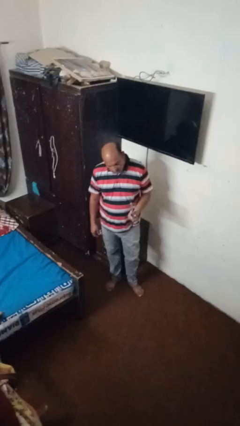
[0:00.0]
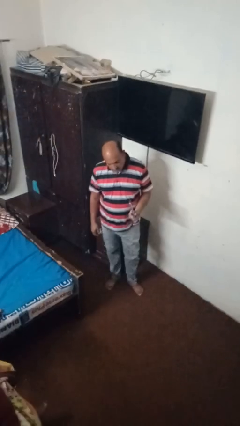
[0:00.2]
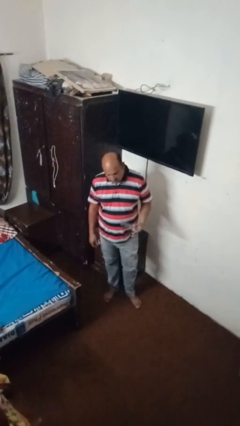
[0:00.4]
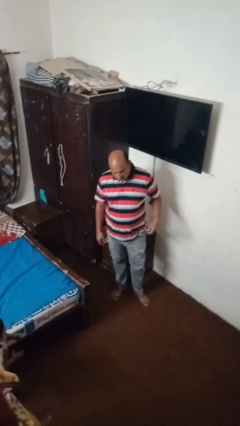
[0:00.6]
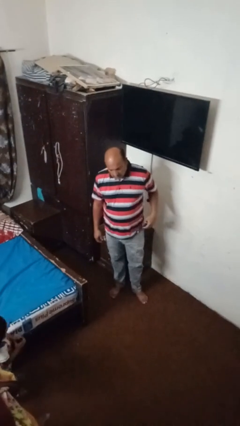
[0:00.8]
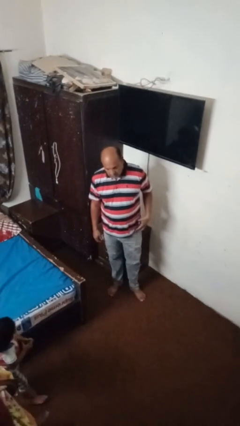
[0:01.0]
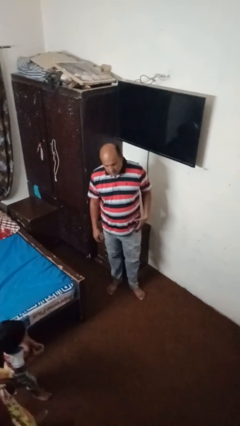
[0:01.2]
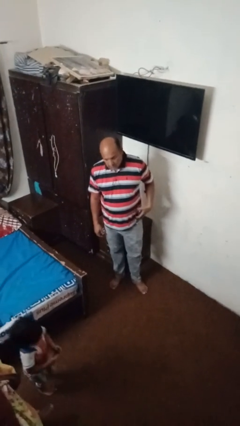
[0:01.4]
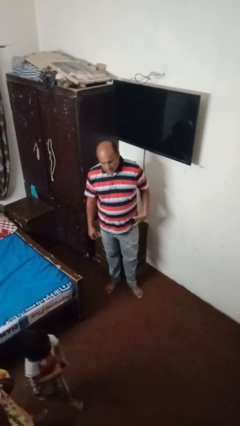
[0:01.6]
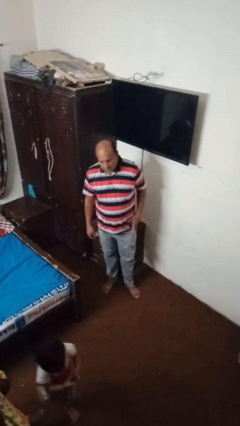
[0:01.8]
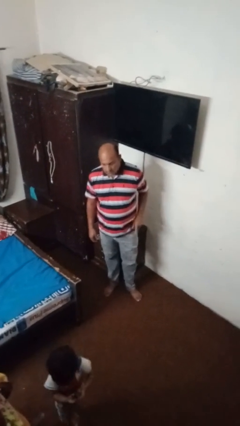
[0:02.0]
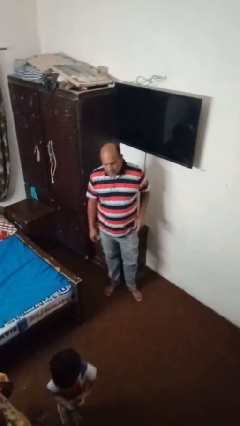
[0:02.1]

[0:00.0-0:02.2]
person puts phone into pocket

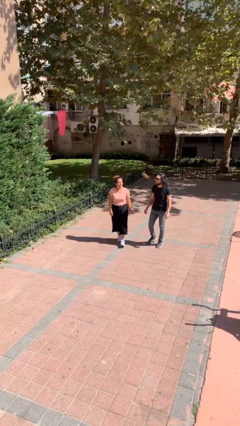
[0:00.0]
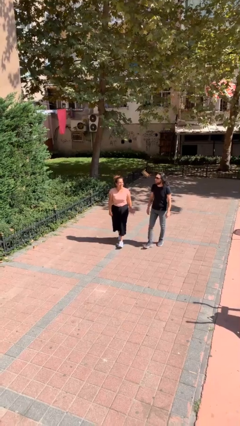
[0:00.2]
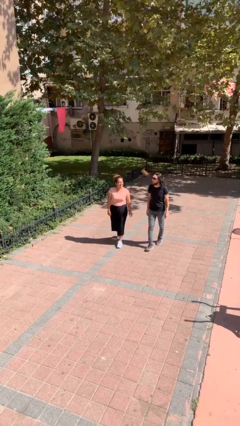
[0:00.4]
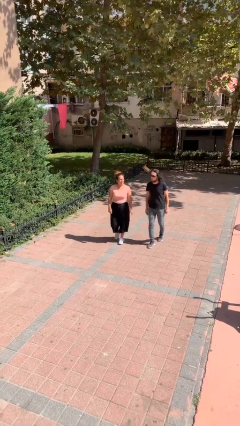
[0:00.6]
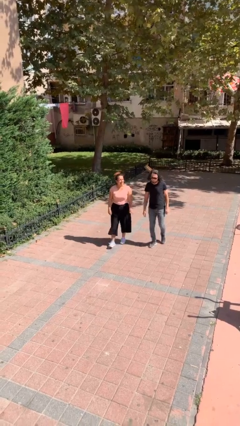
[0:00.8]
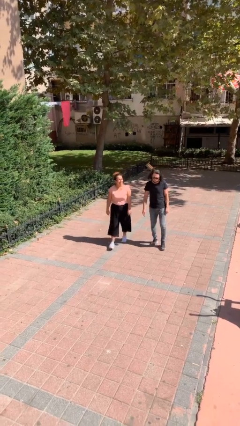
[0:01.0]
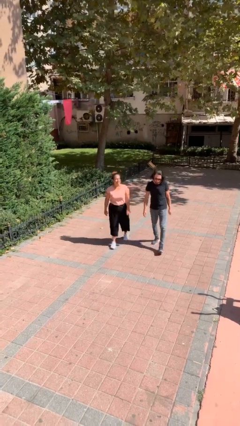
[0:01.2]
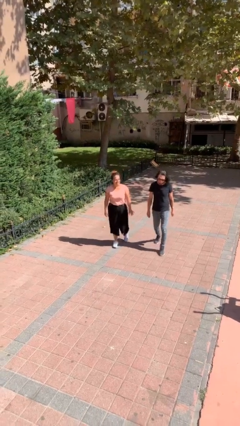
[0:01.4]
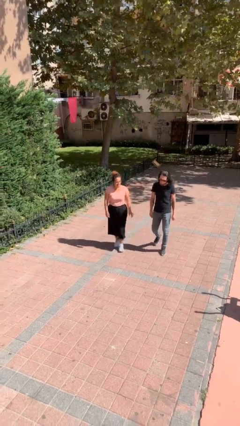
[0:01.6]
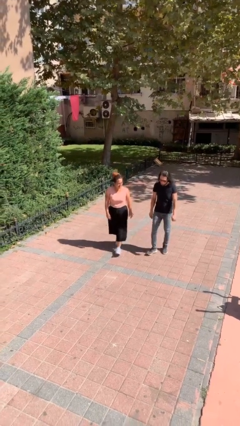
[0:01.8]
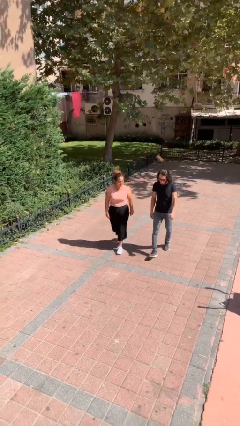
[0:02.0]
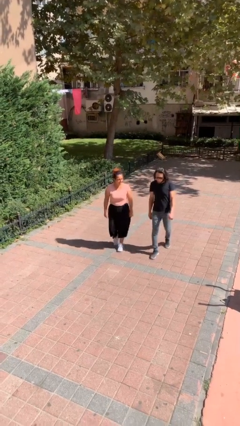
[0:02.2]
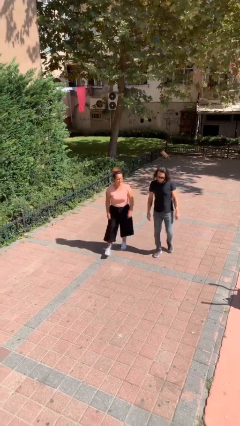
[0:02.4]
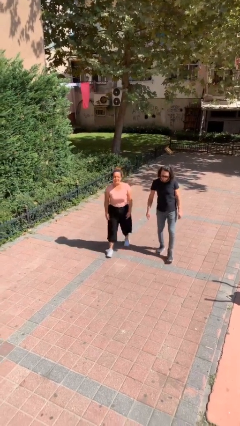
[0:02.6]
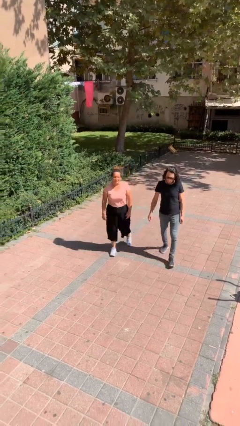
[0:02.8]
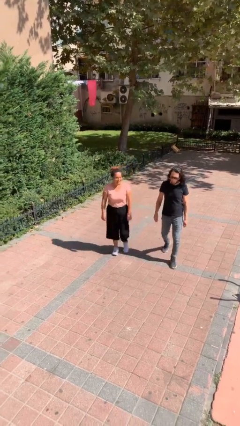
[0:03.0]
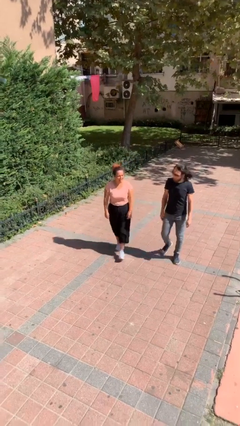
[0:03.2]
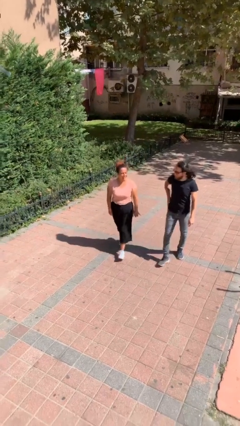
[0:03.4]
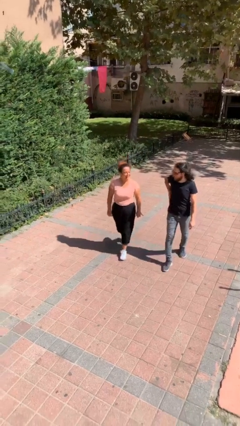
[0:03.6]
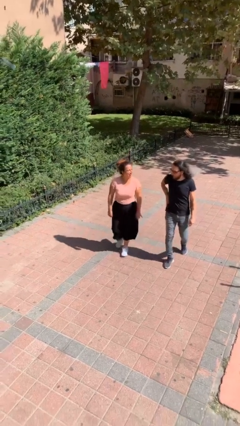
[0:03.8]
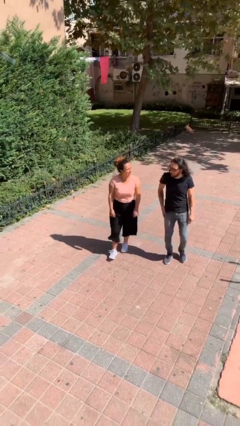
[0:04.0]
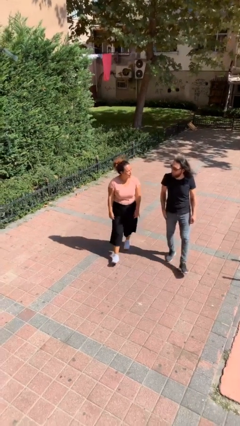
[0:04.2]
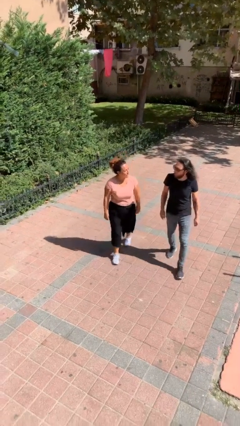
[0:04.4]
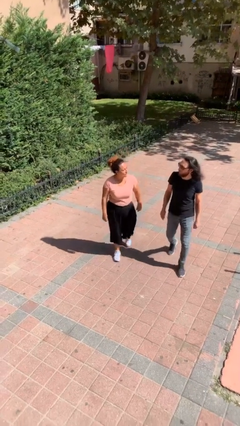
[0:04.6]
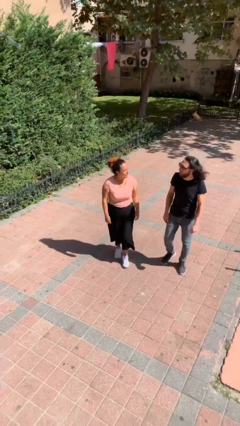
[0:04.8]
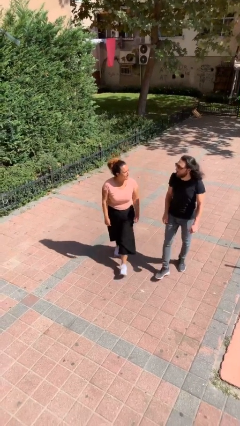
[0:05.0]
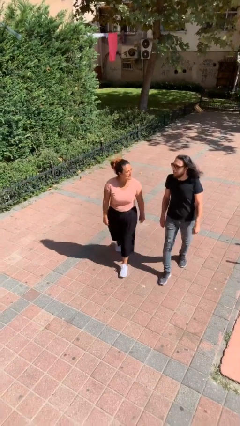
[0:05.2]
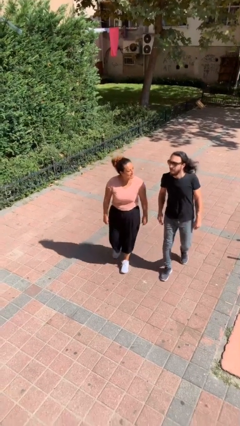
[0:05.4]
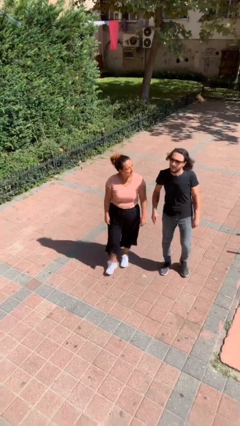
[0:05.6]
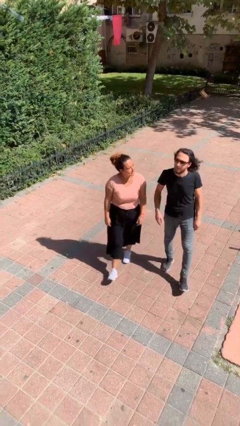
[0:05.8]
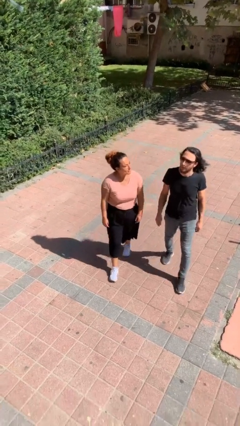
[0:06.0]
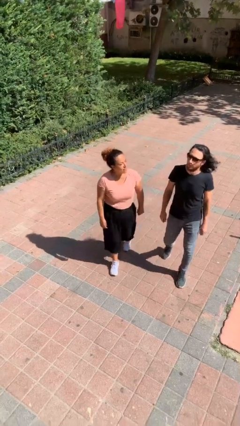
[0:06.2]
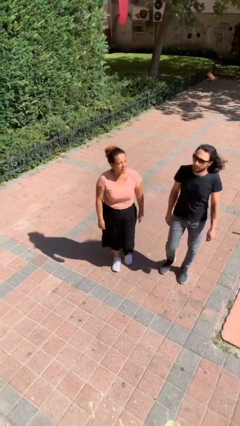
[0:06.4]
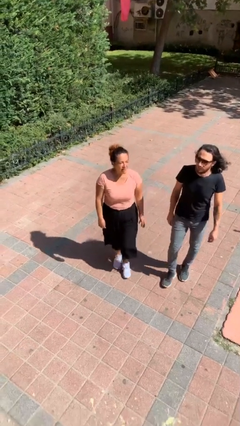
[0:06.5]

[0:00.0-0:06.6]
person talks to person

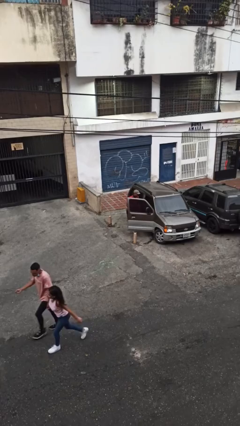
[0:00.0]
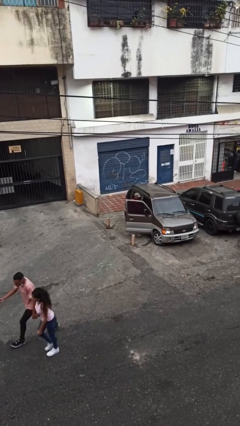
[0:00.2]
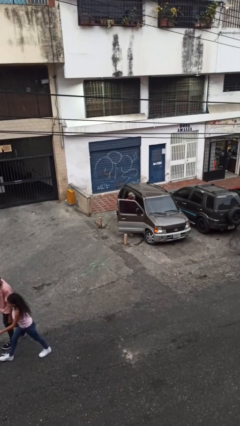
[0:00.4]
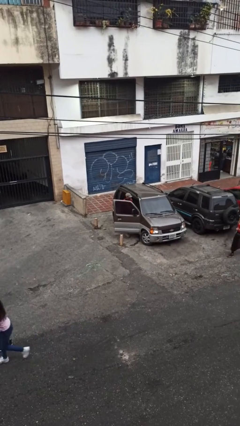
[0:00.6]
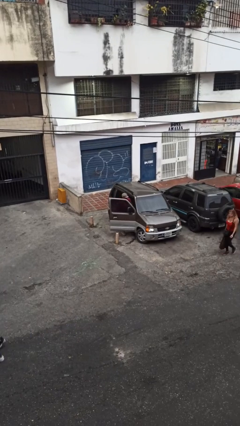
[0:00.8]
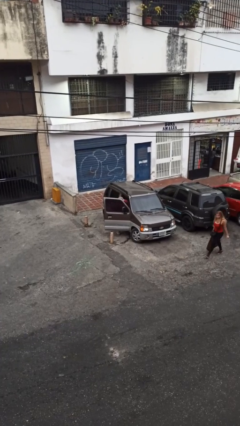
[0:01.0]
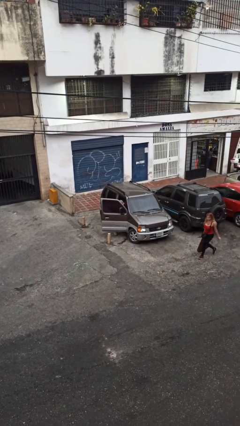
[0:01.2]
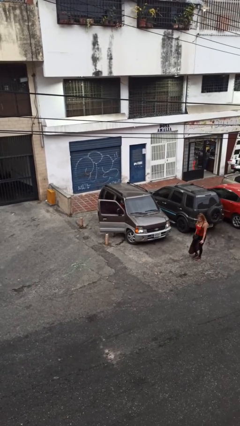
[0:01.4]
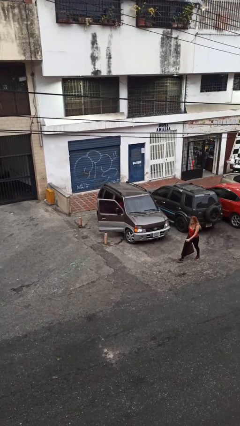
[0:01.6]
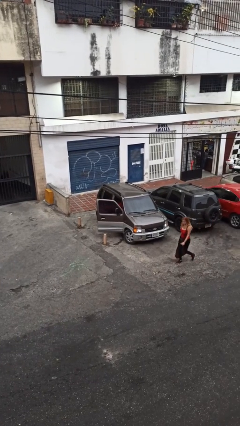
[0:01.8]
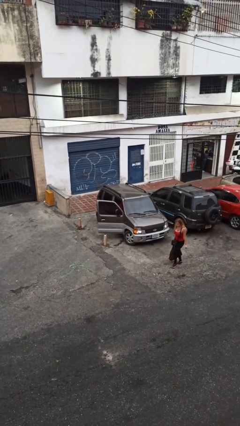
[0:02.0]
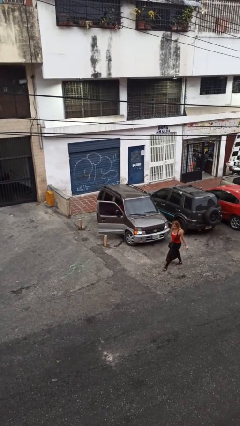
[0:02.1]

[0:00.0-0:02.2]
person enters car

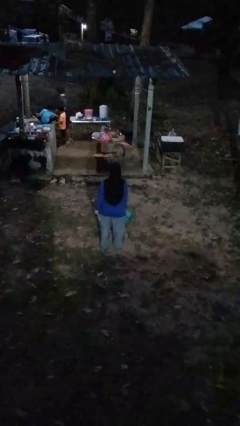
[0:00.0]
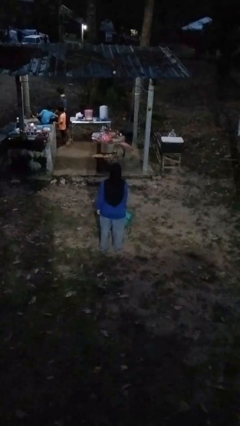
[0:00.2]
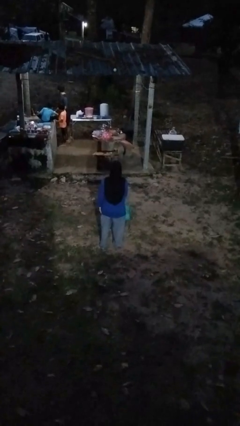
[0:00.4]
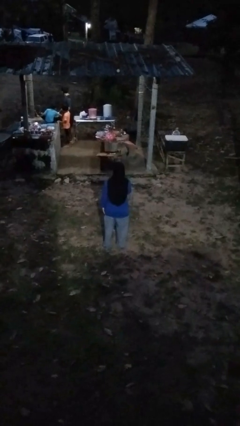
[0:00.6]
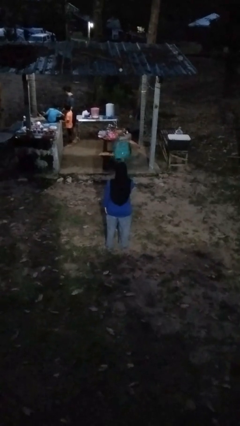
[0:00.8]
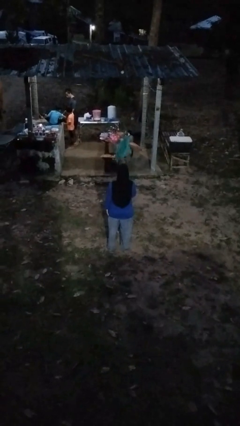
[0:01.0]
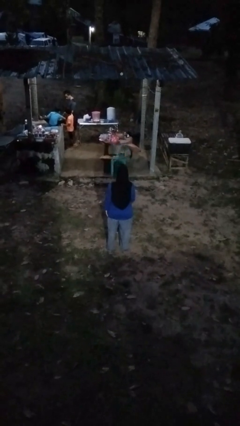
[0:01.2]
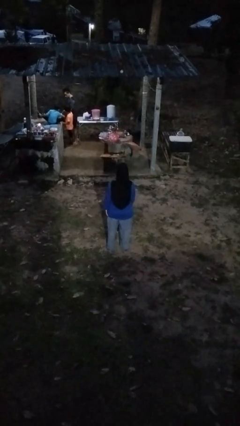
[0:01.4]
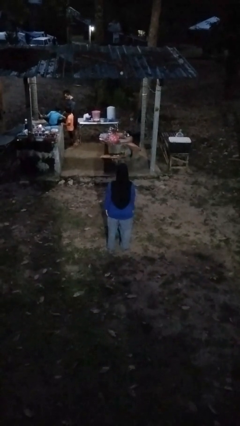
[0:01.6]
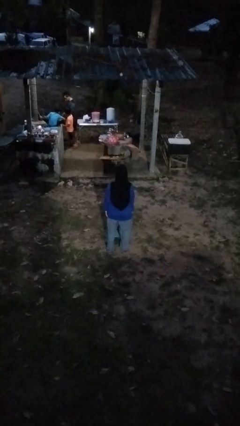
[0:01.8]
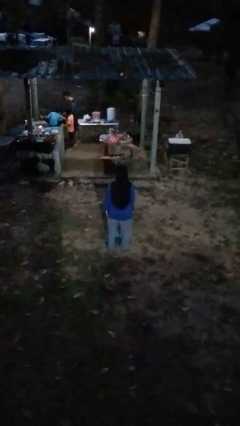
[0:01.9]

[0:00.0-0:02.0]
person throws object into air

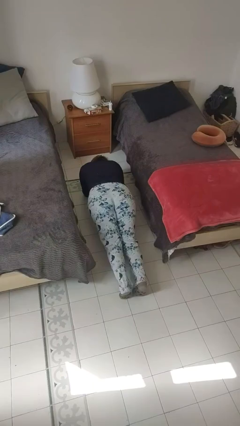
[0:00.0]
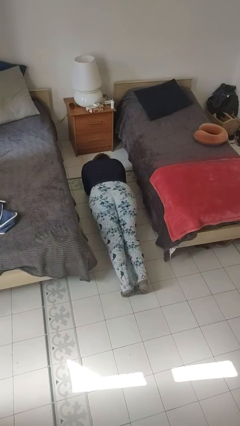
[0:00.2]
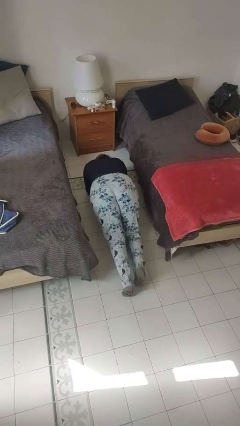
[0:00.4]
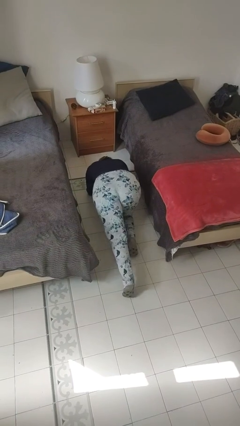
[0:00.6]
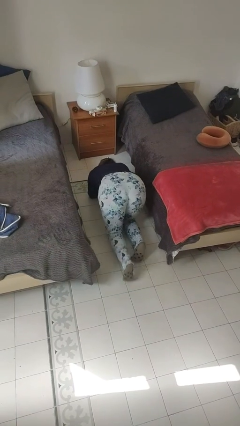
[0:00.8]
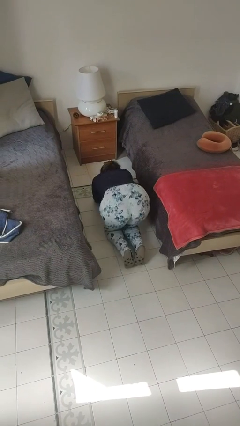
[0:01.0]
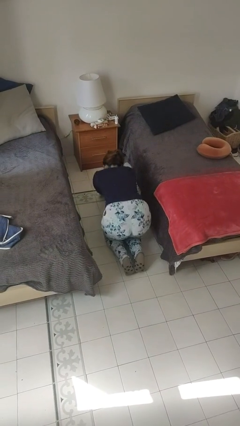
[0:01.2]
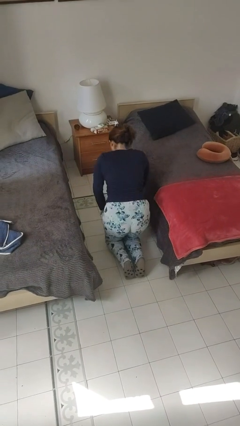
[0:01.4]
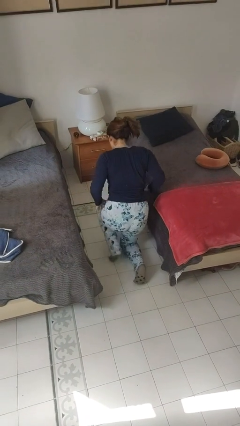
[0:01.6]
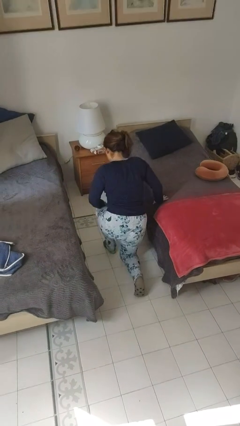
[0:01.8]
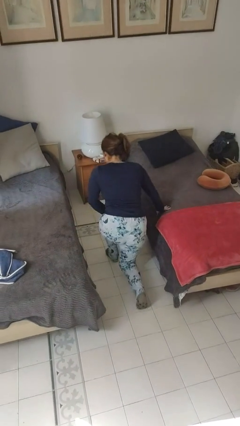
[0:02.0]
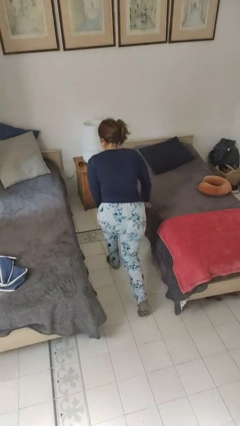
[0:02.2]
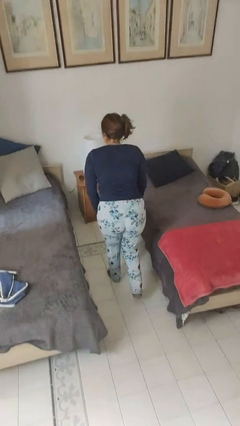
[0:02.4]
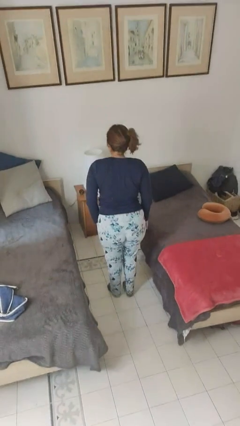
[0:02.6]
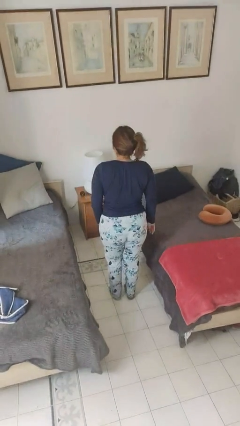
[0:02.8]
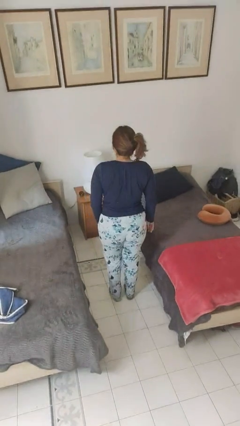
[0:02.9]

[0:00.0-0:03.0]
person stands up from floor

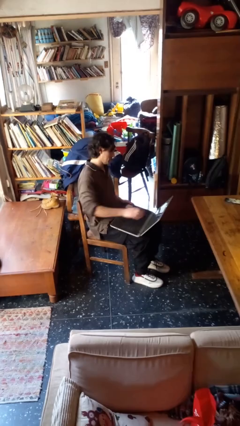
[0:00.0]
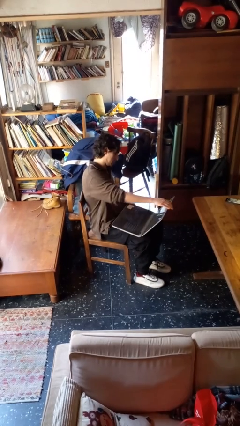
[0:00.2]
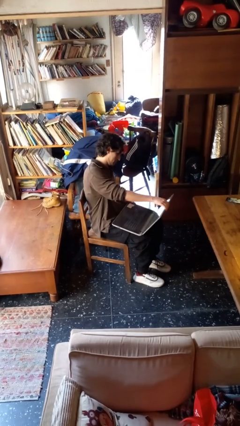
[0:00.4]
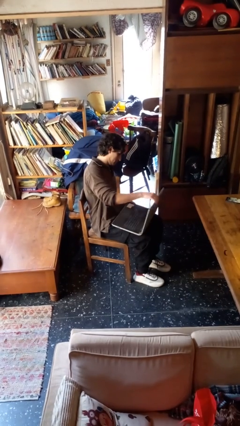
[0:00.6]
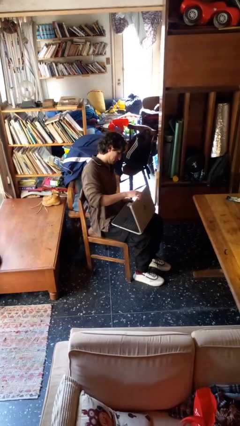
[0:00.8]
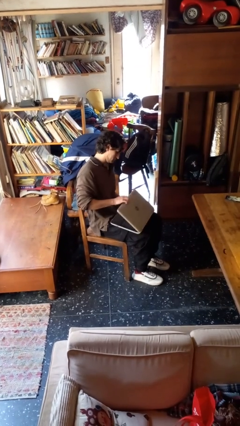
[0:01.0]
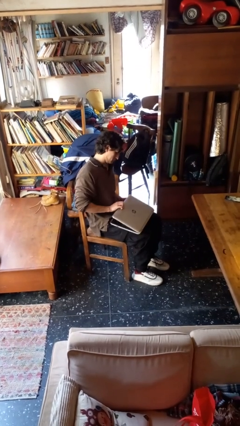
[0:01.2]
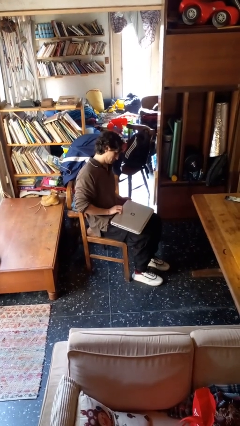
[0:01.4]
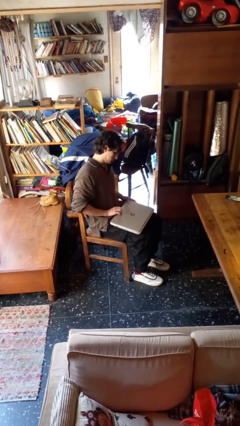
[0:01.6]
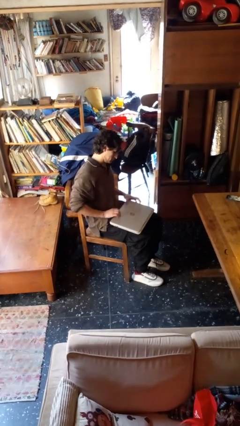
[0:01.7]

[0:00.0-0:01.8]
person closes laptop
